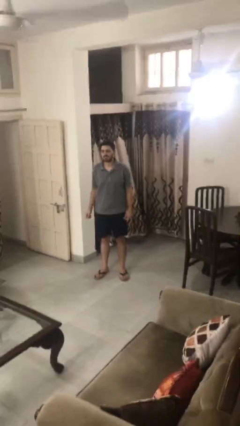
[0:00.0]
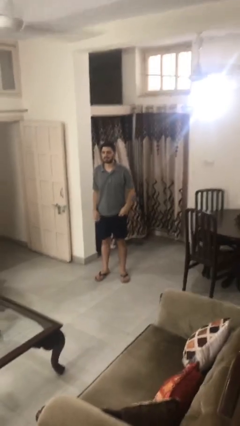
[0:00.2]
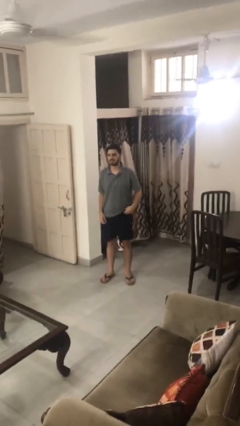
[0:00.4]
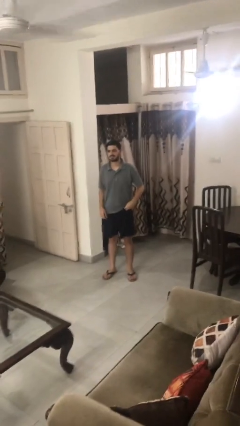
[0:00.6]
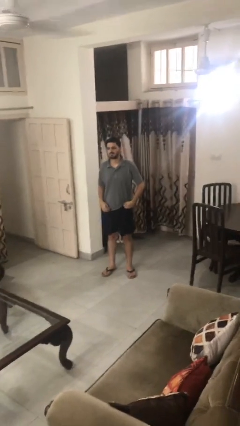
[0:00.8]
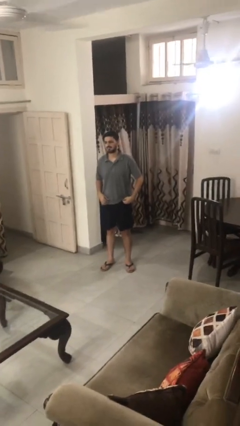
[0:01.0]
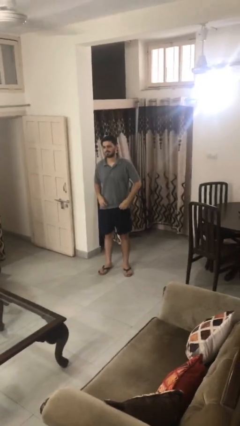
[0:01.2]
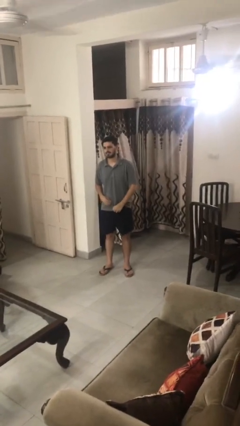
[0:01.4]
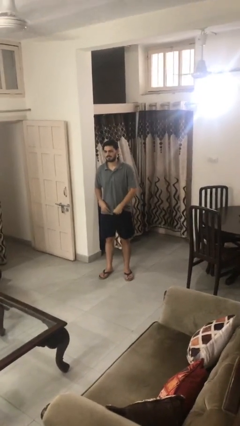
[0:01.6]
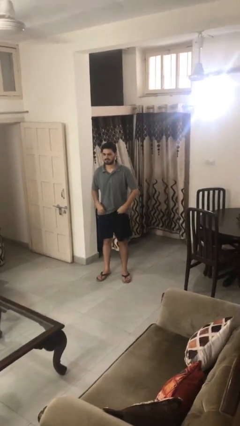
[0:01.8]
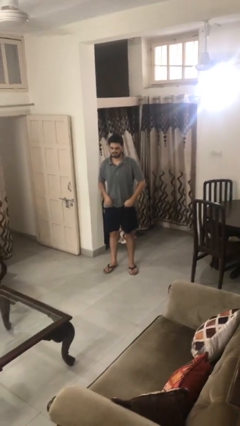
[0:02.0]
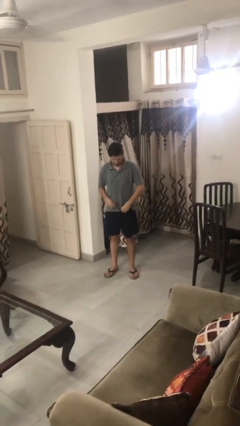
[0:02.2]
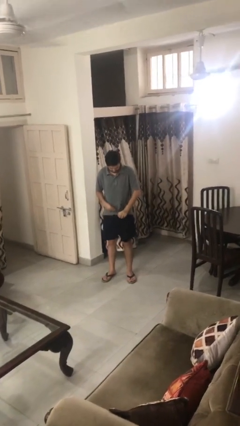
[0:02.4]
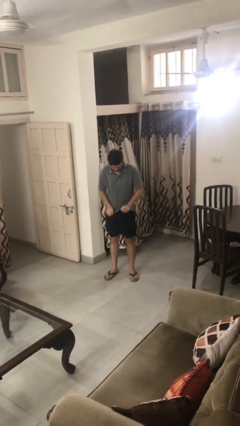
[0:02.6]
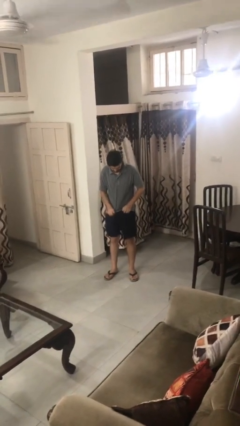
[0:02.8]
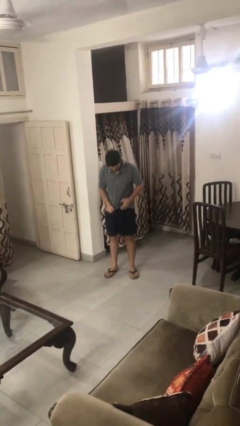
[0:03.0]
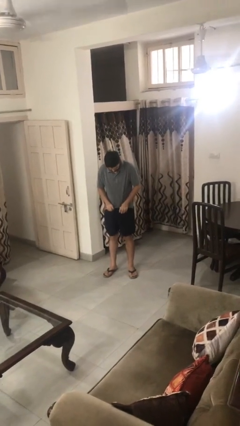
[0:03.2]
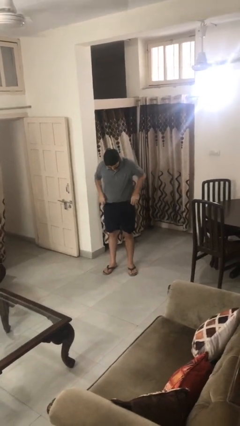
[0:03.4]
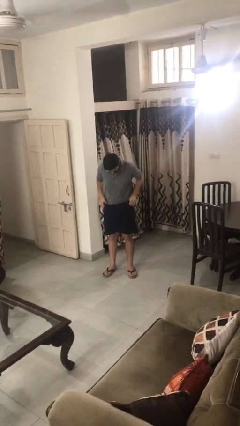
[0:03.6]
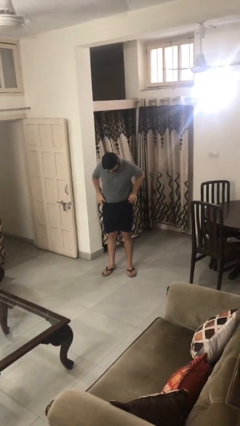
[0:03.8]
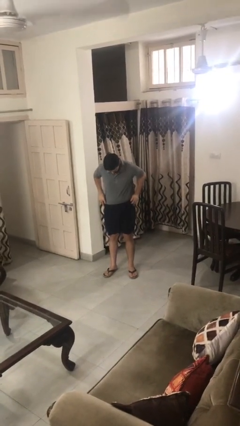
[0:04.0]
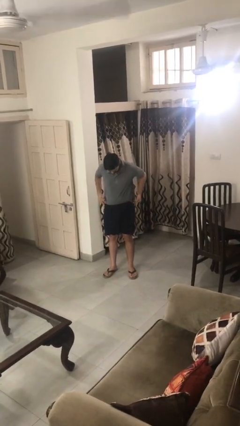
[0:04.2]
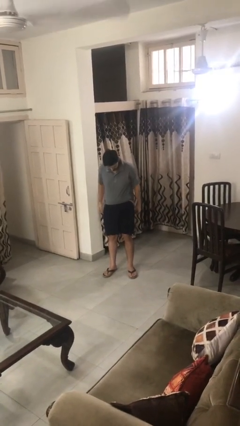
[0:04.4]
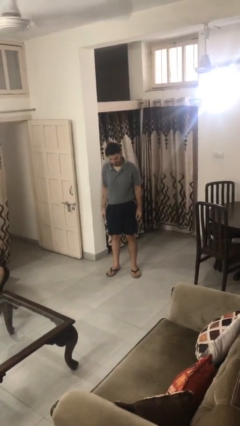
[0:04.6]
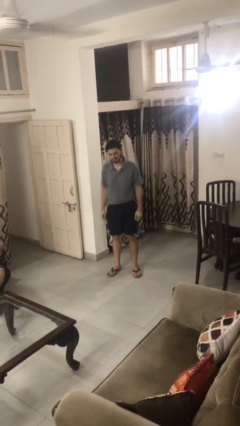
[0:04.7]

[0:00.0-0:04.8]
person tucks in shirt

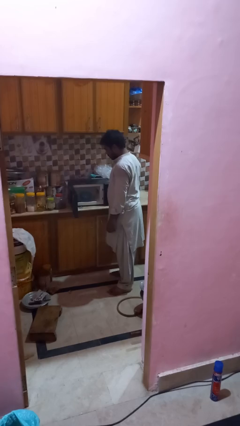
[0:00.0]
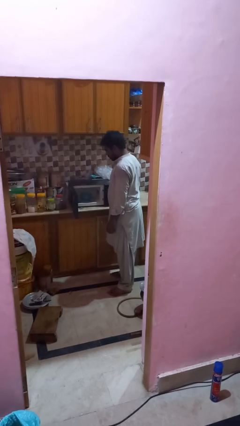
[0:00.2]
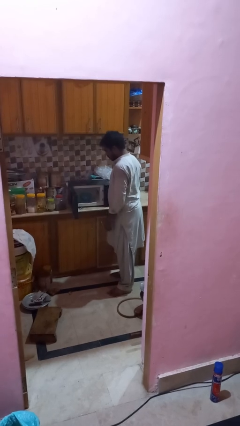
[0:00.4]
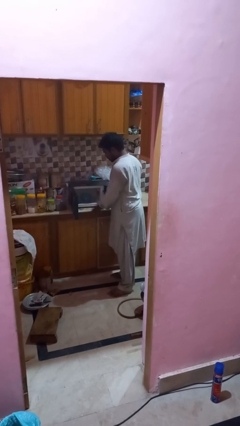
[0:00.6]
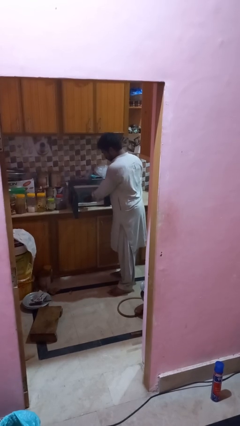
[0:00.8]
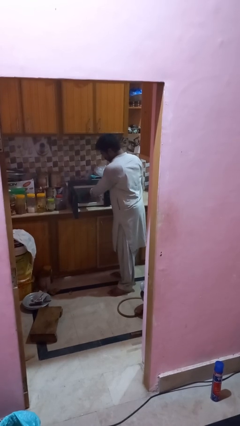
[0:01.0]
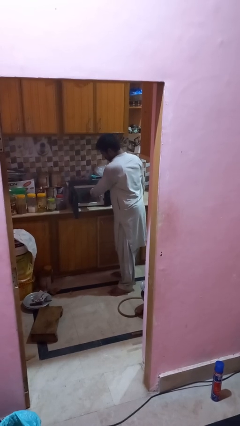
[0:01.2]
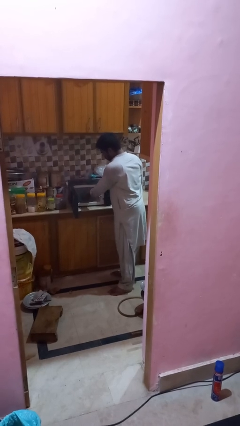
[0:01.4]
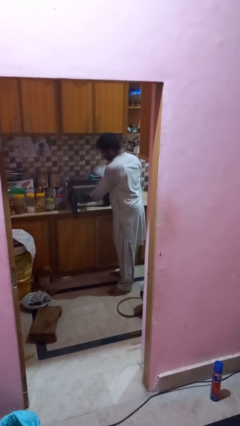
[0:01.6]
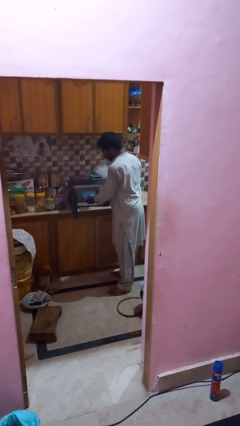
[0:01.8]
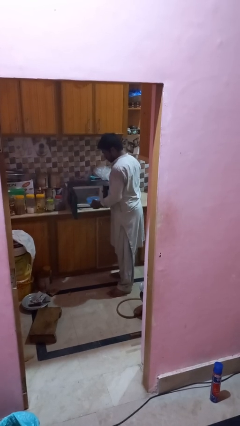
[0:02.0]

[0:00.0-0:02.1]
person takes object from microwave

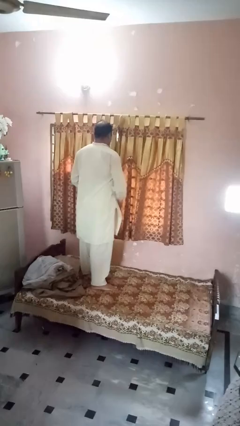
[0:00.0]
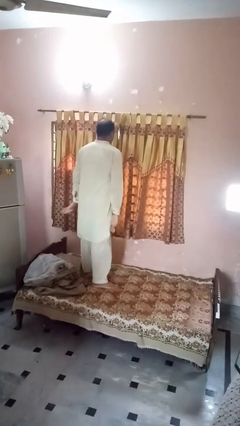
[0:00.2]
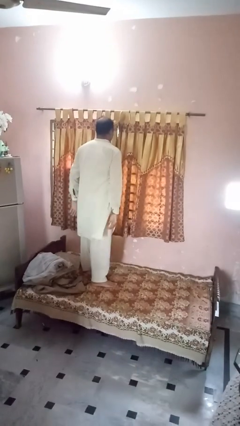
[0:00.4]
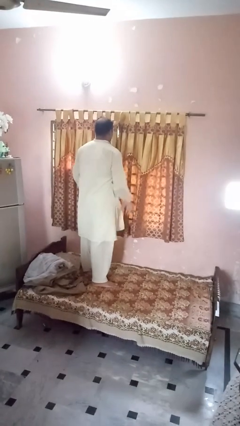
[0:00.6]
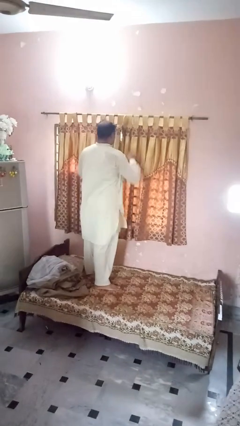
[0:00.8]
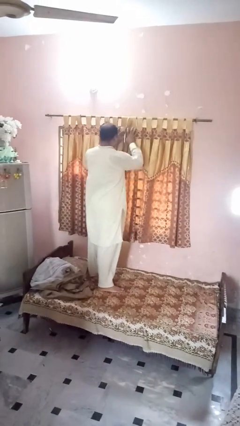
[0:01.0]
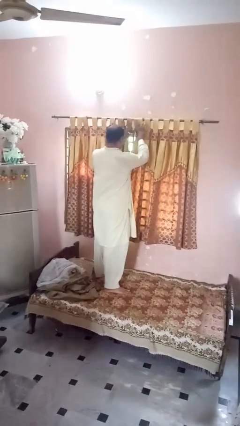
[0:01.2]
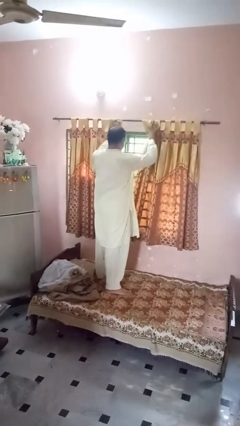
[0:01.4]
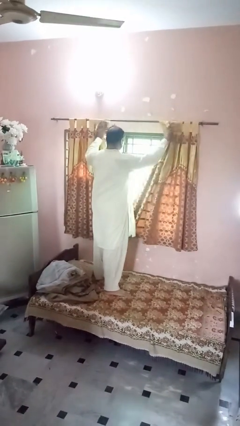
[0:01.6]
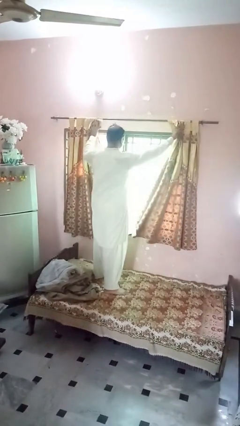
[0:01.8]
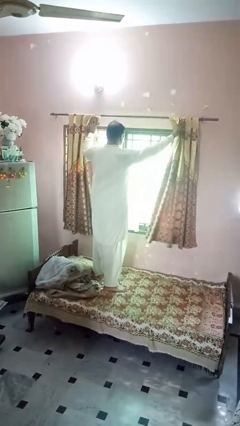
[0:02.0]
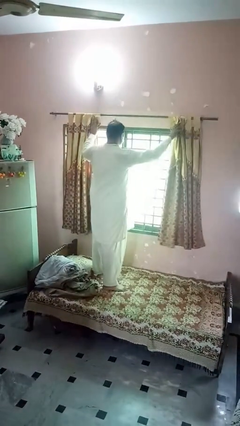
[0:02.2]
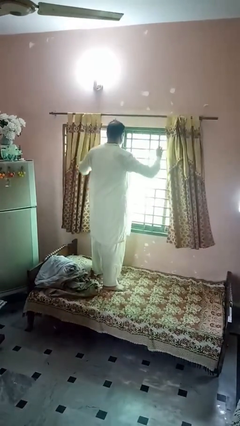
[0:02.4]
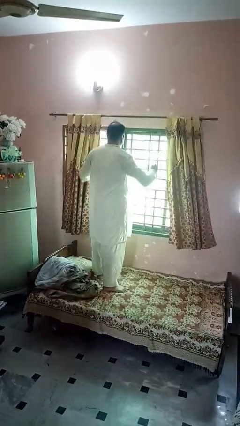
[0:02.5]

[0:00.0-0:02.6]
person opens curtains

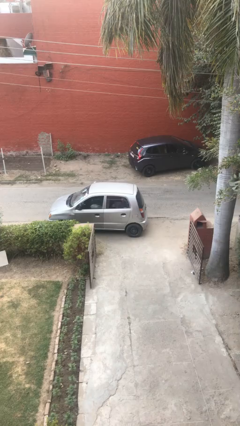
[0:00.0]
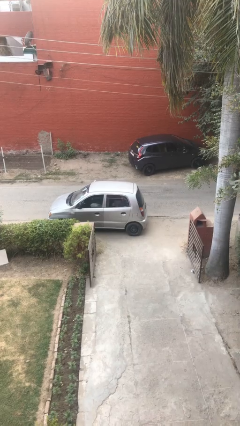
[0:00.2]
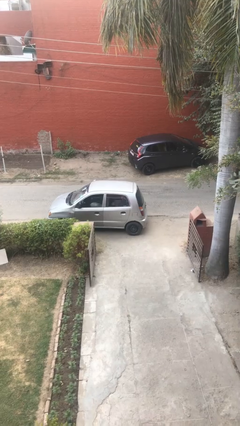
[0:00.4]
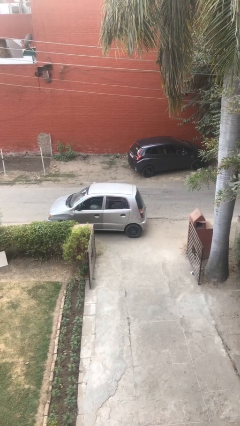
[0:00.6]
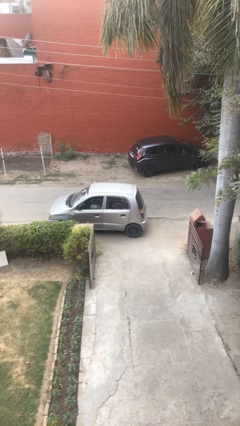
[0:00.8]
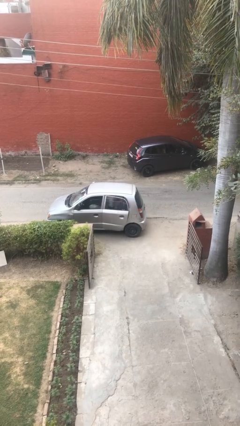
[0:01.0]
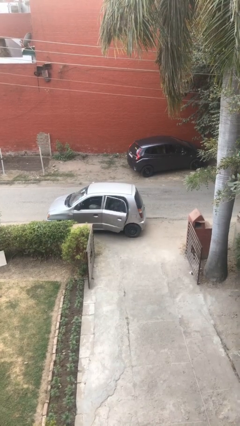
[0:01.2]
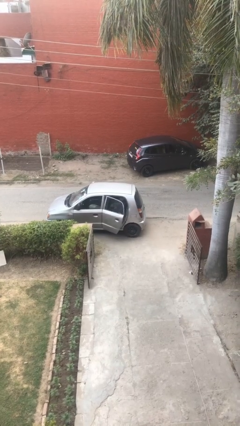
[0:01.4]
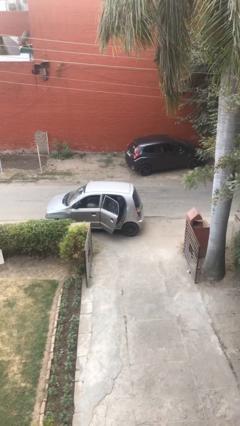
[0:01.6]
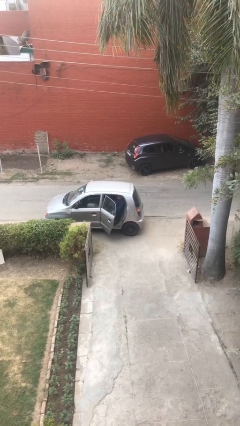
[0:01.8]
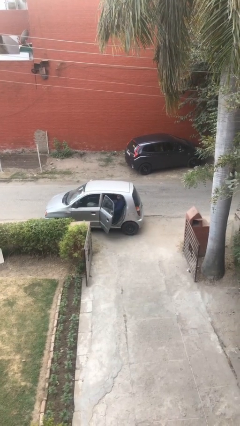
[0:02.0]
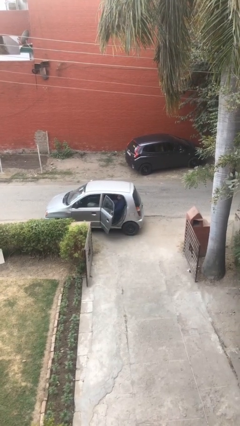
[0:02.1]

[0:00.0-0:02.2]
person opens car door

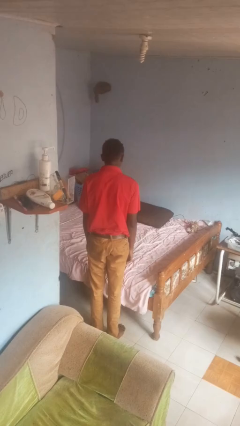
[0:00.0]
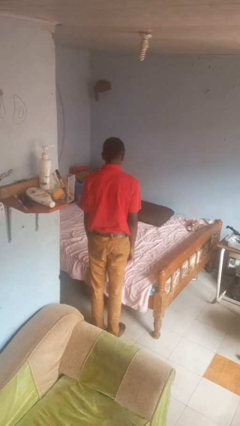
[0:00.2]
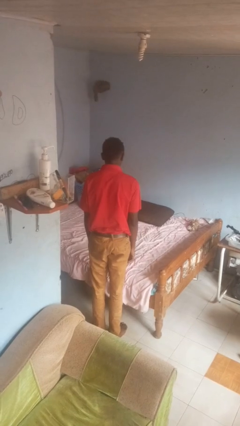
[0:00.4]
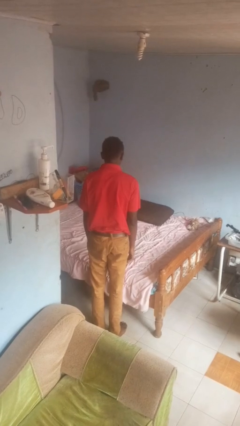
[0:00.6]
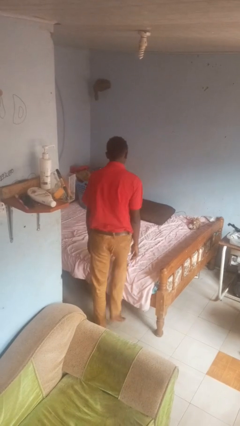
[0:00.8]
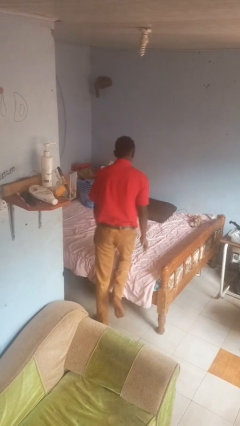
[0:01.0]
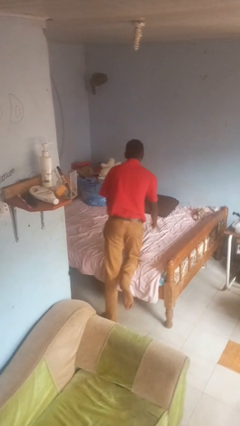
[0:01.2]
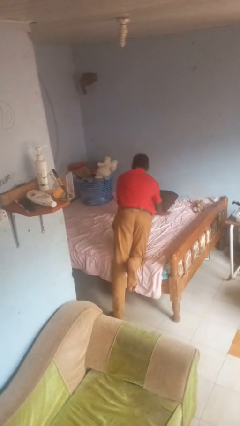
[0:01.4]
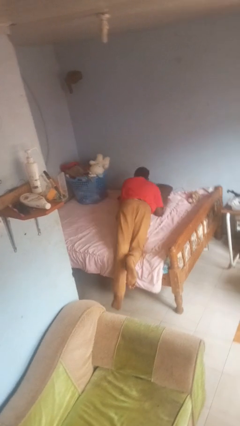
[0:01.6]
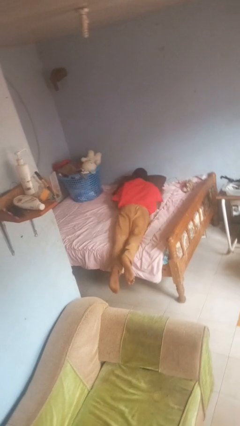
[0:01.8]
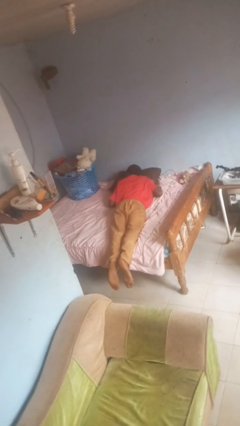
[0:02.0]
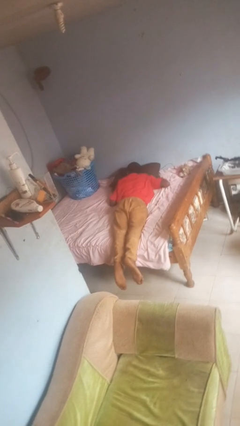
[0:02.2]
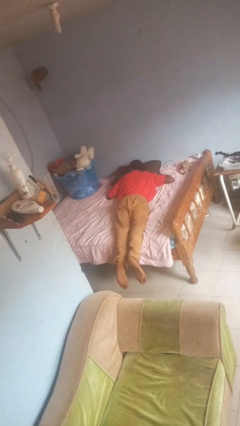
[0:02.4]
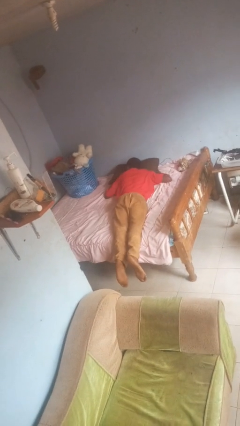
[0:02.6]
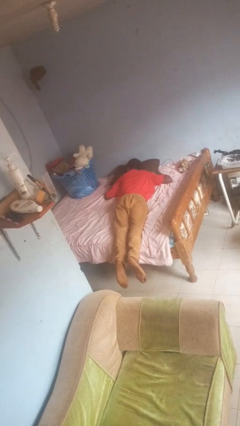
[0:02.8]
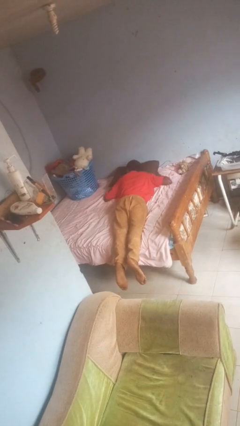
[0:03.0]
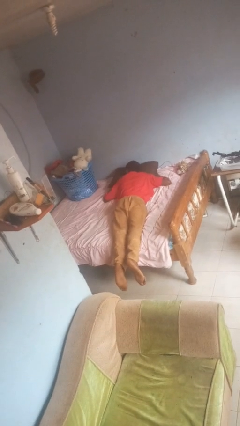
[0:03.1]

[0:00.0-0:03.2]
person lies down on bed

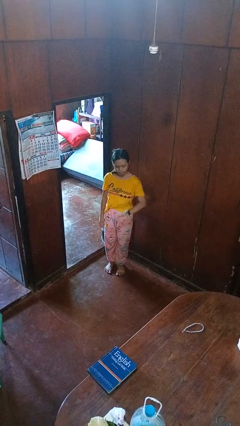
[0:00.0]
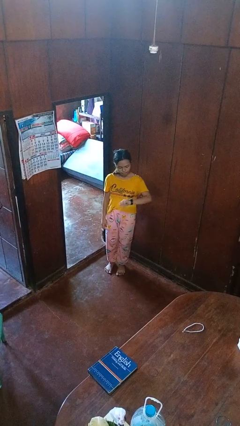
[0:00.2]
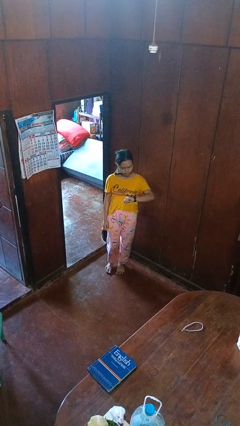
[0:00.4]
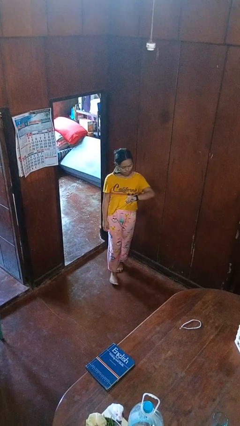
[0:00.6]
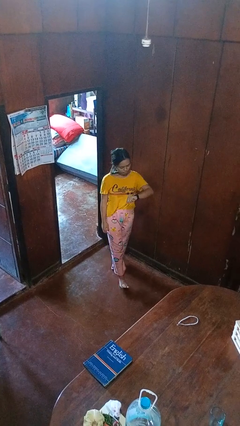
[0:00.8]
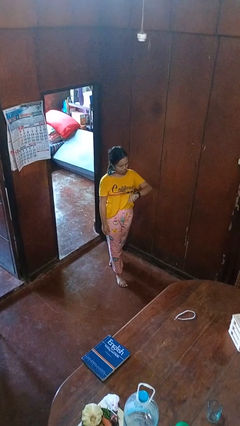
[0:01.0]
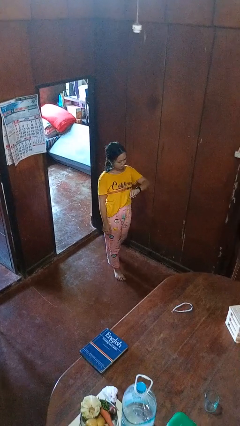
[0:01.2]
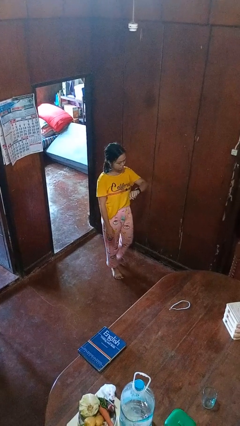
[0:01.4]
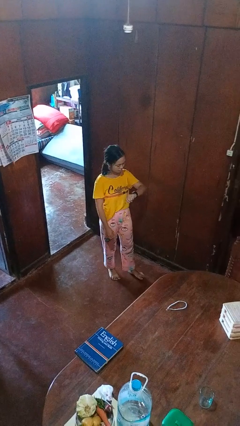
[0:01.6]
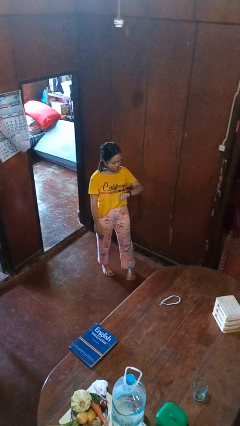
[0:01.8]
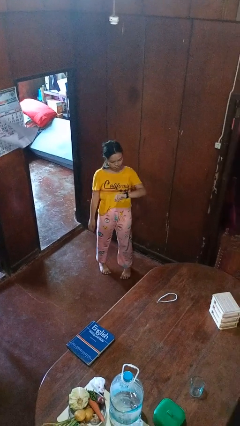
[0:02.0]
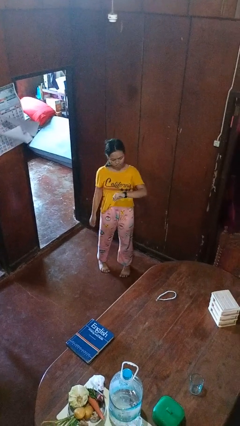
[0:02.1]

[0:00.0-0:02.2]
person looks at wristwatch

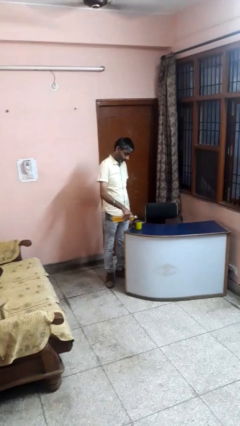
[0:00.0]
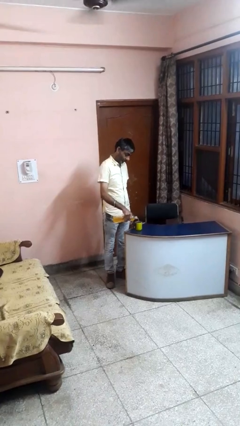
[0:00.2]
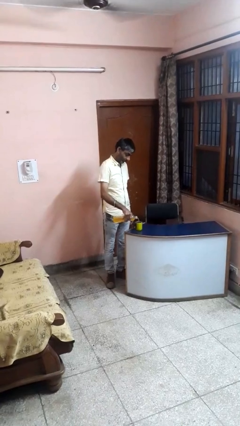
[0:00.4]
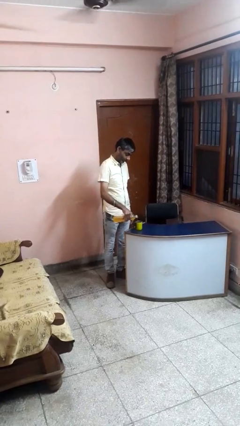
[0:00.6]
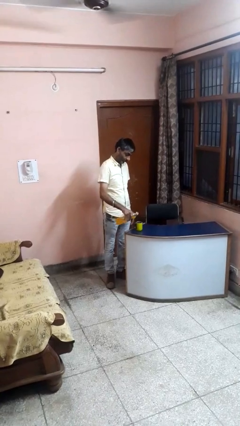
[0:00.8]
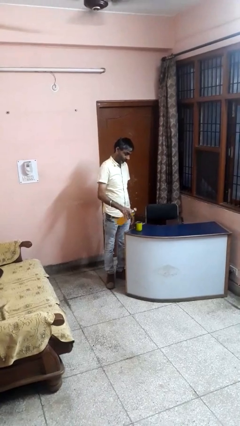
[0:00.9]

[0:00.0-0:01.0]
person pours liquid into cup
